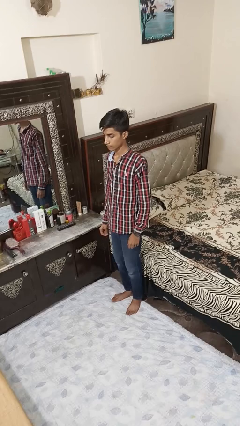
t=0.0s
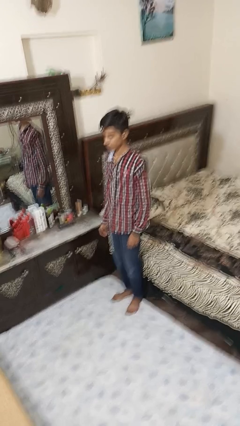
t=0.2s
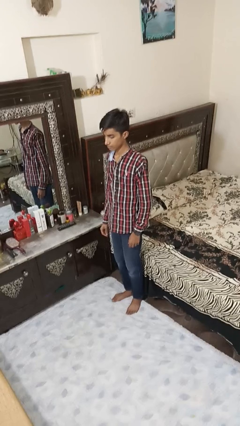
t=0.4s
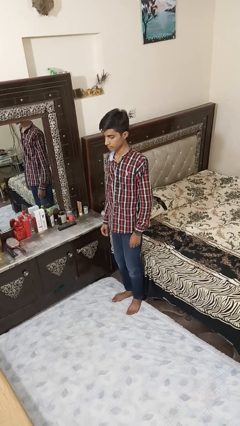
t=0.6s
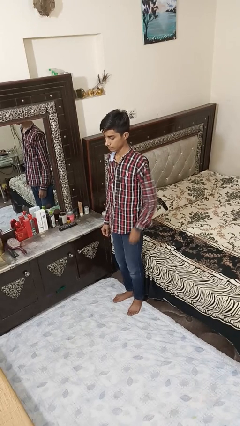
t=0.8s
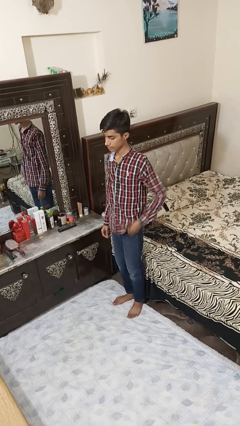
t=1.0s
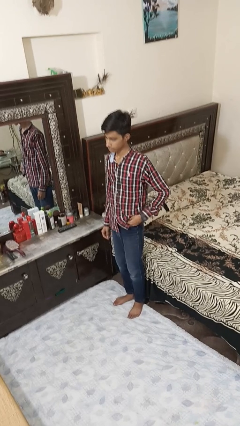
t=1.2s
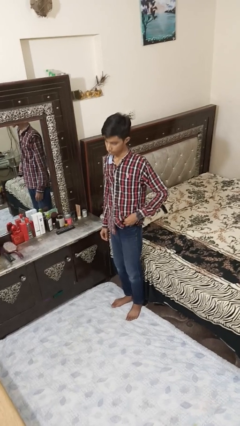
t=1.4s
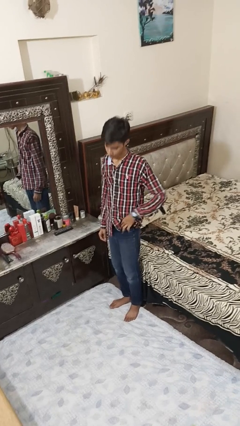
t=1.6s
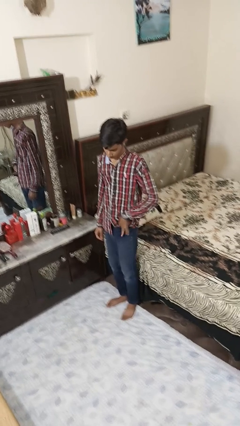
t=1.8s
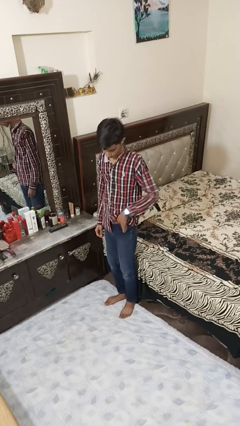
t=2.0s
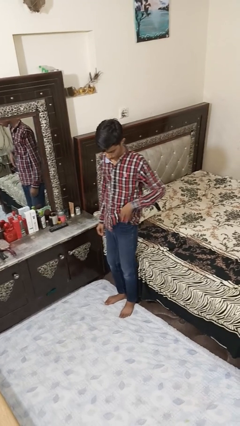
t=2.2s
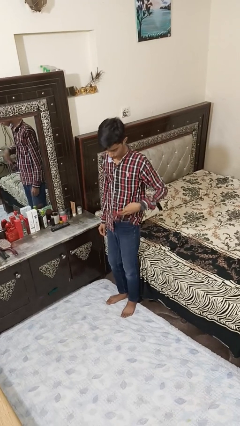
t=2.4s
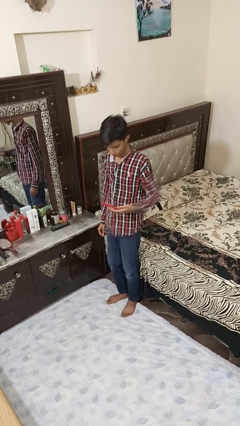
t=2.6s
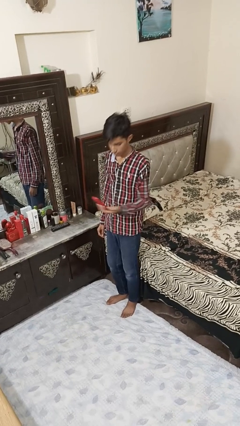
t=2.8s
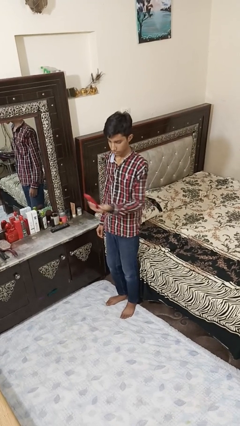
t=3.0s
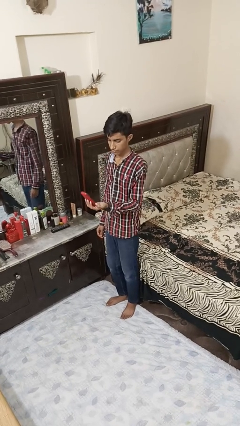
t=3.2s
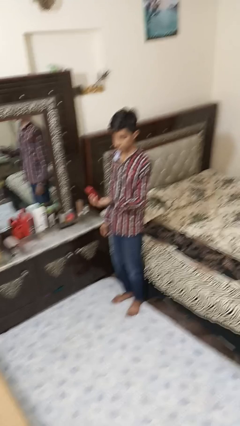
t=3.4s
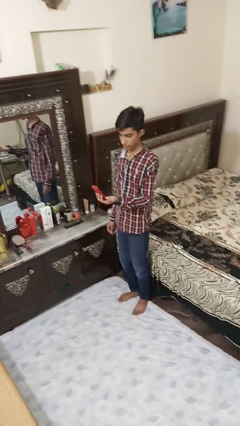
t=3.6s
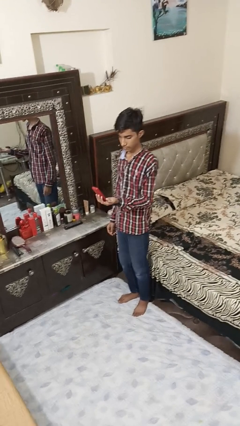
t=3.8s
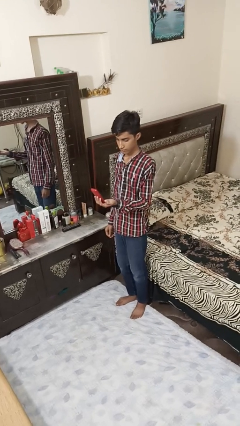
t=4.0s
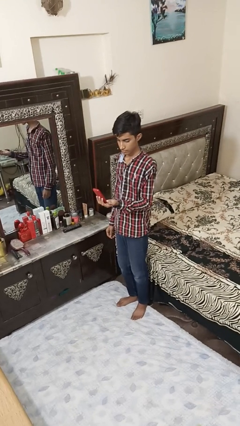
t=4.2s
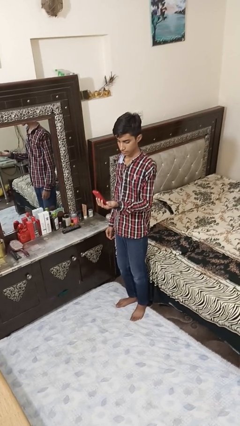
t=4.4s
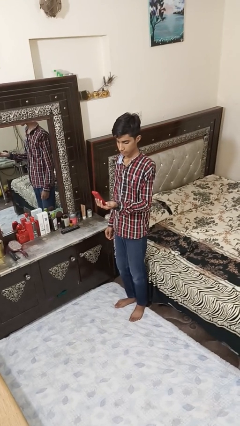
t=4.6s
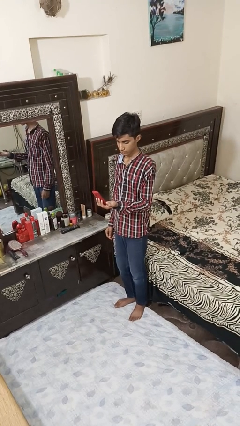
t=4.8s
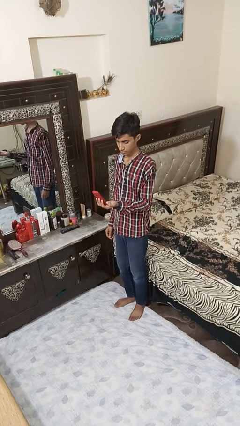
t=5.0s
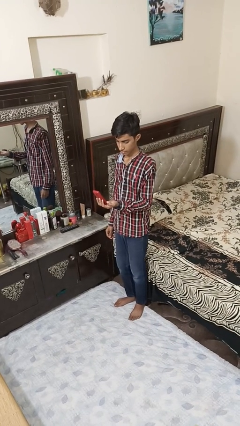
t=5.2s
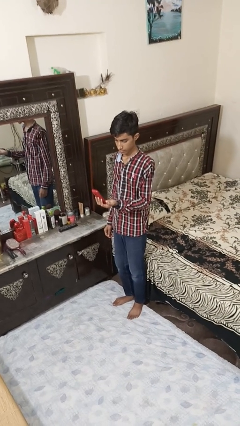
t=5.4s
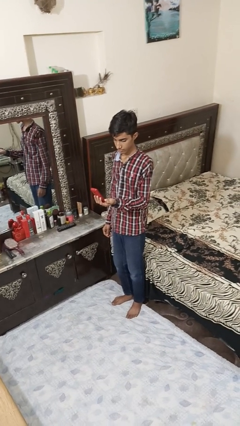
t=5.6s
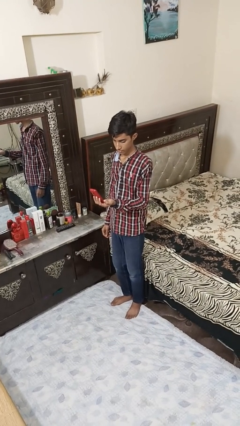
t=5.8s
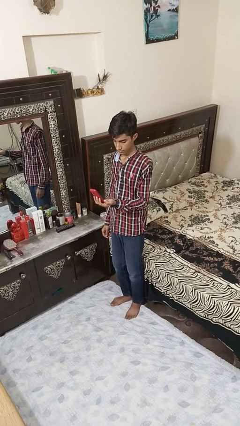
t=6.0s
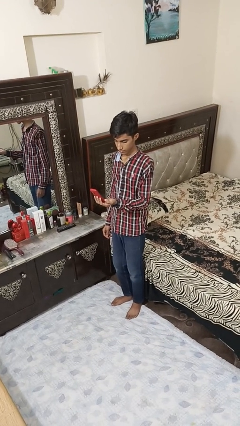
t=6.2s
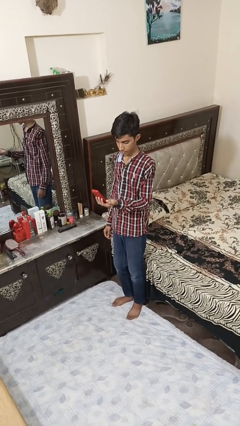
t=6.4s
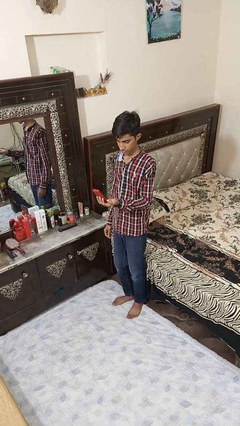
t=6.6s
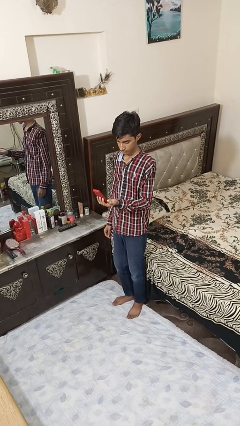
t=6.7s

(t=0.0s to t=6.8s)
person takes phone from pocket

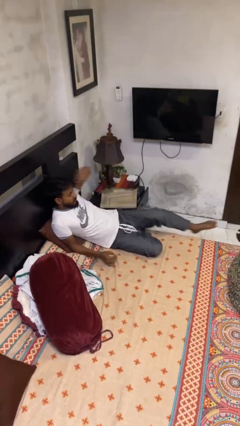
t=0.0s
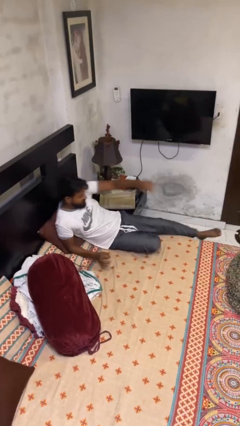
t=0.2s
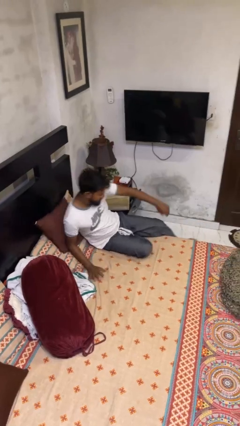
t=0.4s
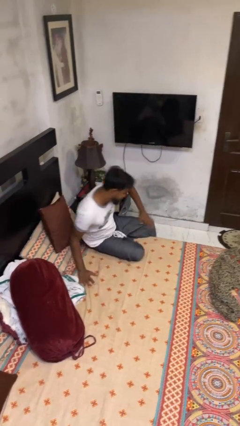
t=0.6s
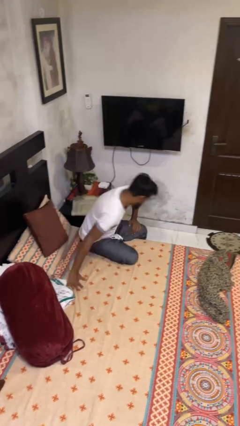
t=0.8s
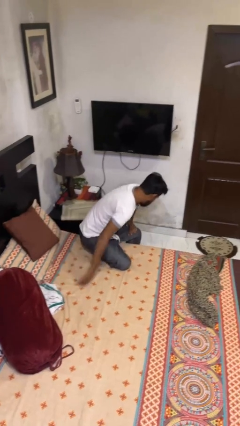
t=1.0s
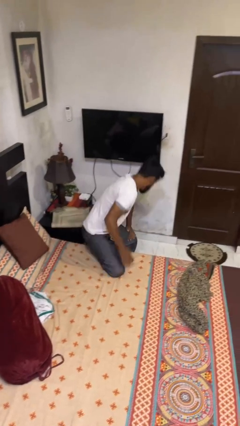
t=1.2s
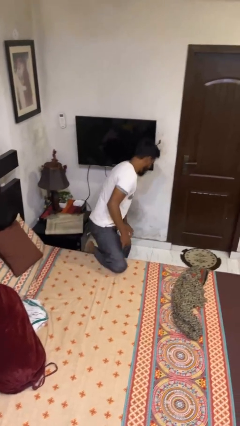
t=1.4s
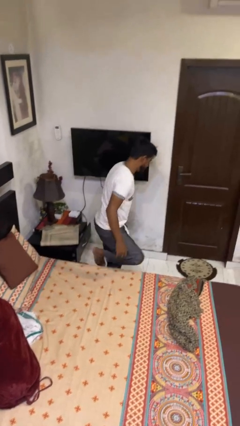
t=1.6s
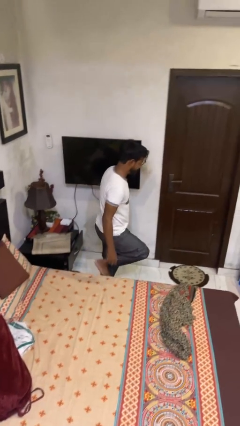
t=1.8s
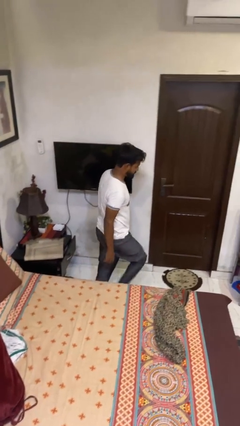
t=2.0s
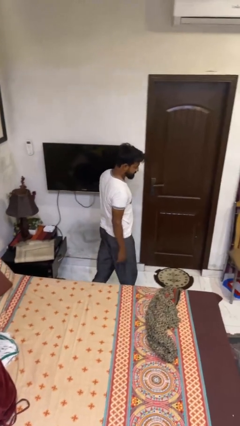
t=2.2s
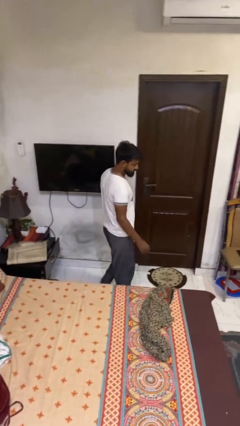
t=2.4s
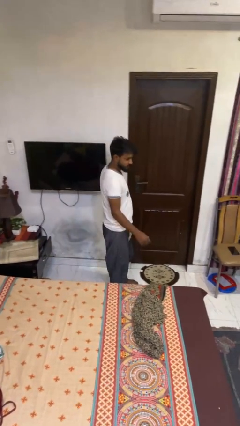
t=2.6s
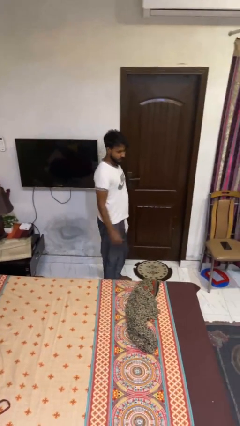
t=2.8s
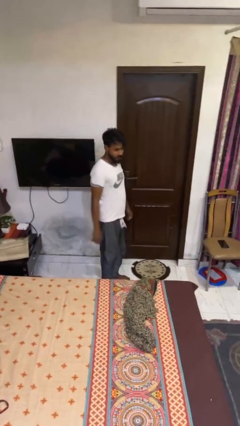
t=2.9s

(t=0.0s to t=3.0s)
person stands up

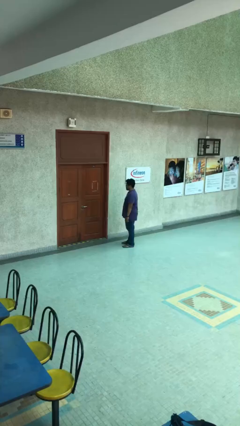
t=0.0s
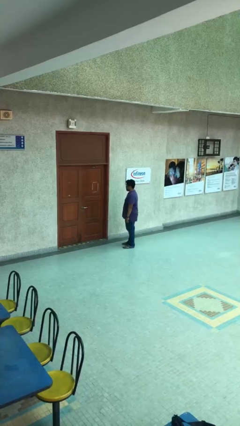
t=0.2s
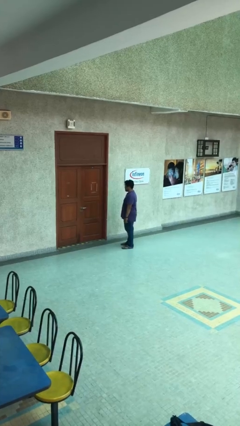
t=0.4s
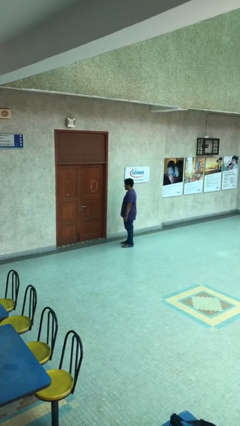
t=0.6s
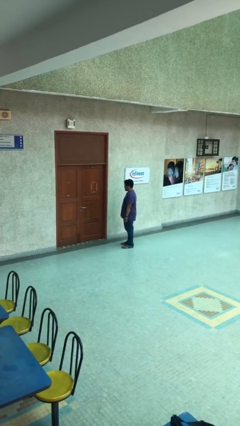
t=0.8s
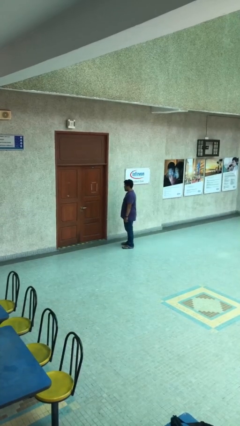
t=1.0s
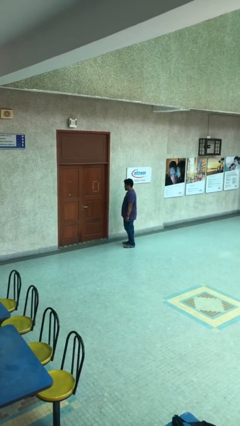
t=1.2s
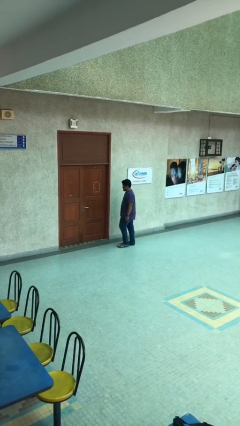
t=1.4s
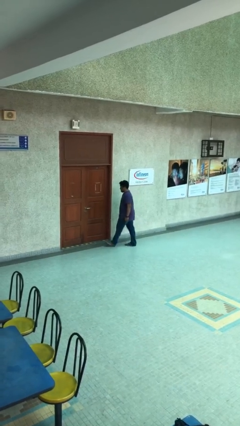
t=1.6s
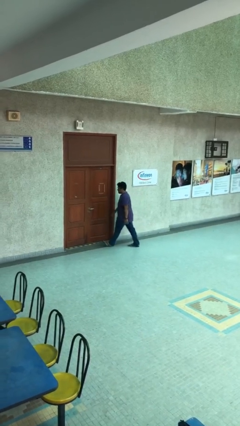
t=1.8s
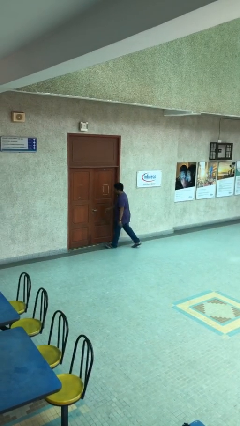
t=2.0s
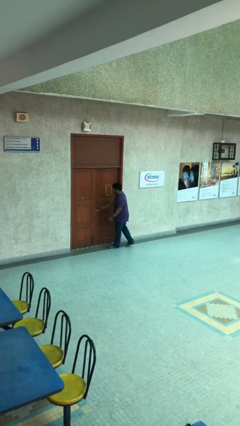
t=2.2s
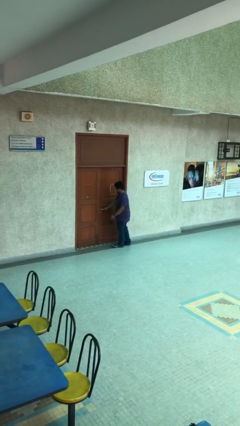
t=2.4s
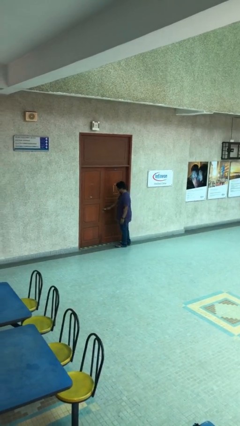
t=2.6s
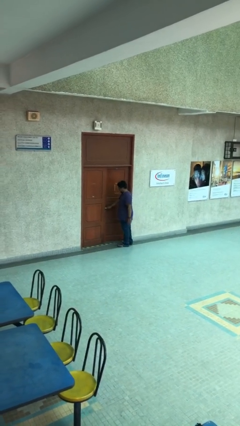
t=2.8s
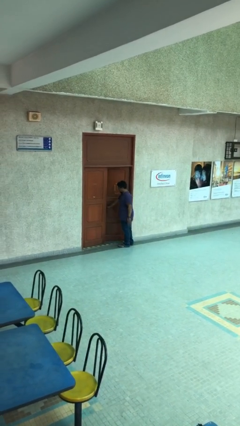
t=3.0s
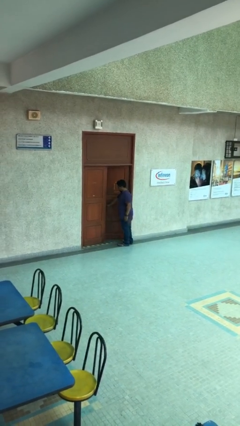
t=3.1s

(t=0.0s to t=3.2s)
person opens facility door

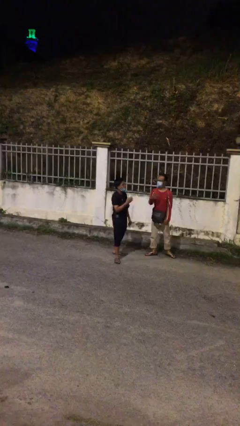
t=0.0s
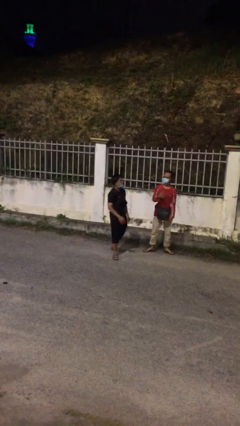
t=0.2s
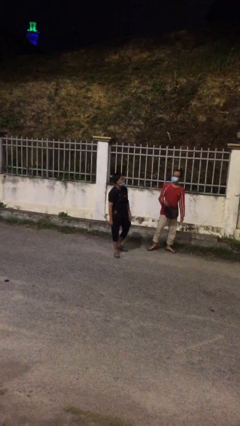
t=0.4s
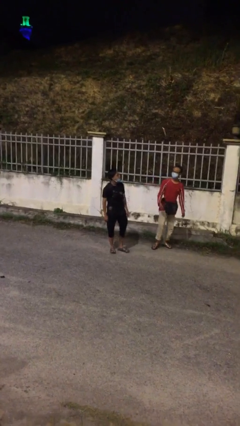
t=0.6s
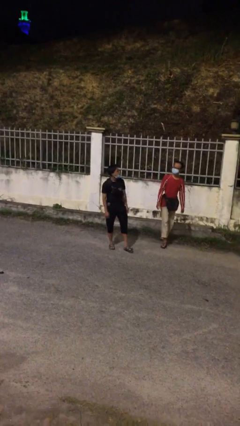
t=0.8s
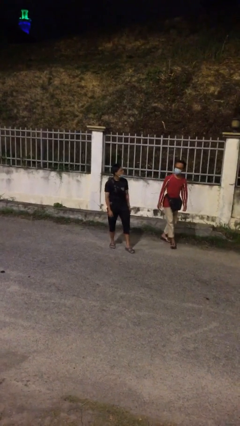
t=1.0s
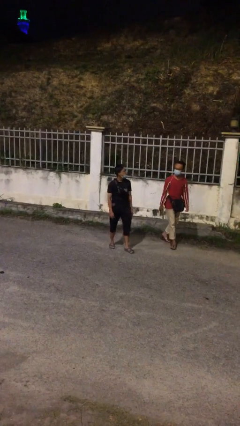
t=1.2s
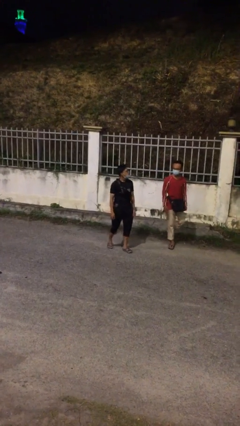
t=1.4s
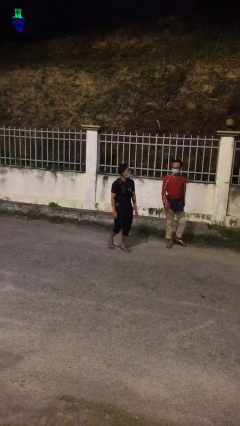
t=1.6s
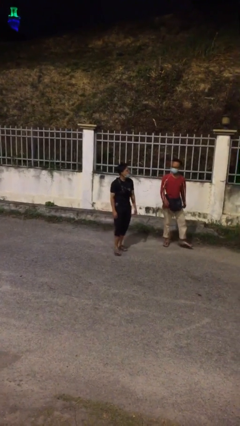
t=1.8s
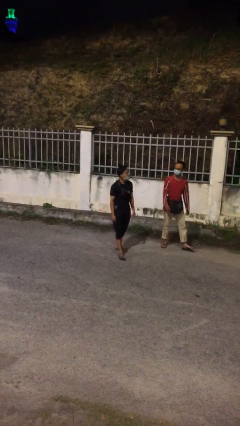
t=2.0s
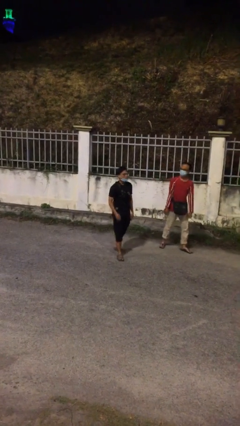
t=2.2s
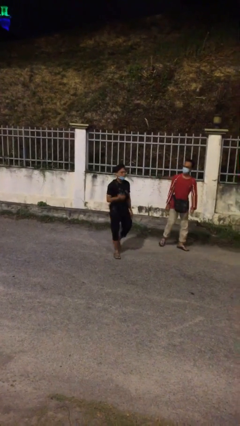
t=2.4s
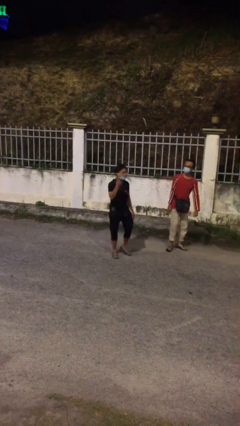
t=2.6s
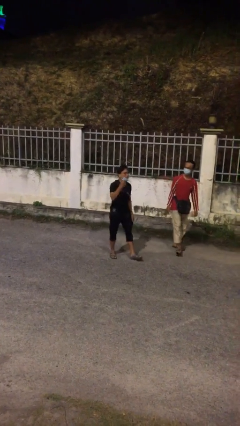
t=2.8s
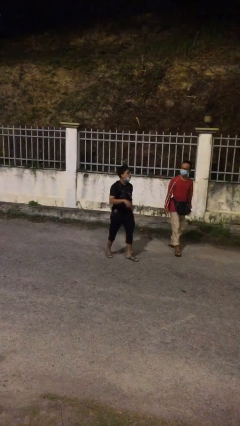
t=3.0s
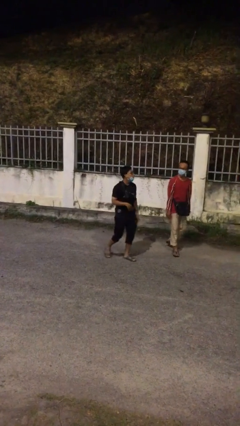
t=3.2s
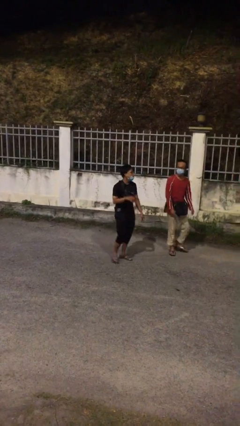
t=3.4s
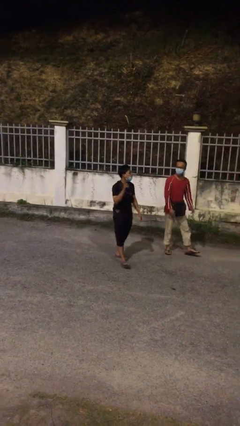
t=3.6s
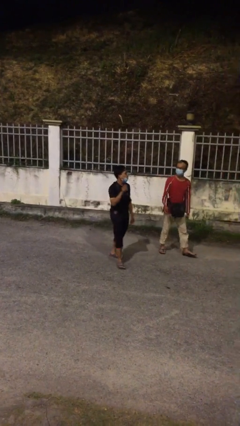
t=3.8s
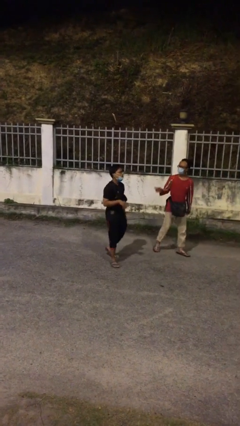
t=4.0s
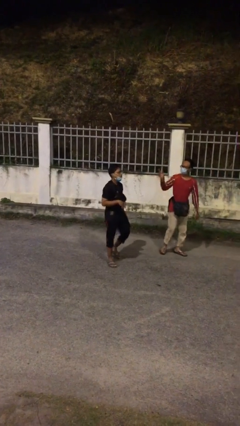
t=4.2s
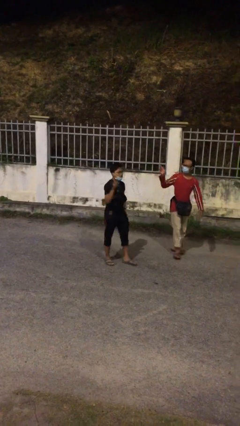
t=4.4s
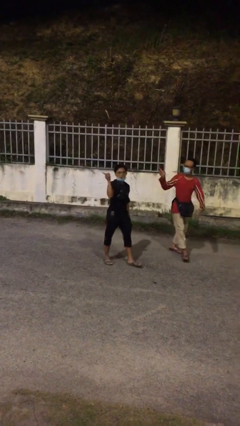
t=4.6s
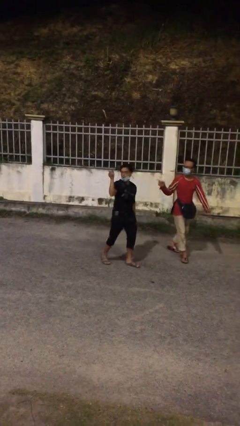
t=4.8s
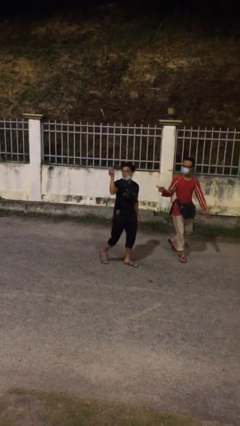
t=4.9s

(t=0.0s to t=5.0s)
person talks to person
